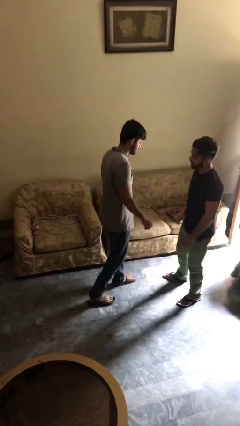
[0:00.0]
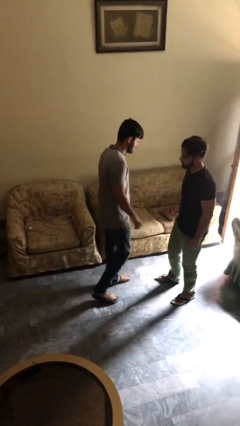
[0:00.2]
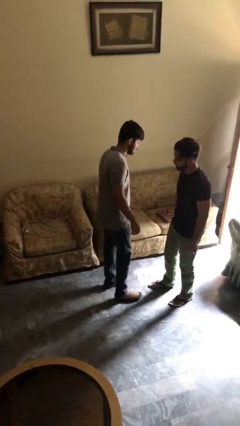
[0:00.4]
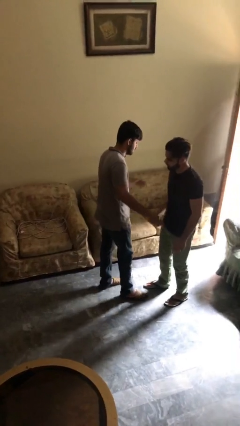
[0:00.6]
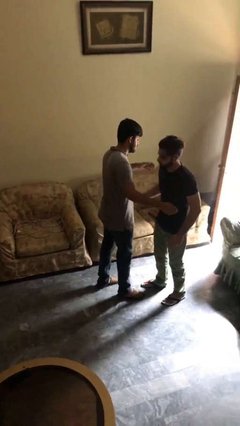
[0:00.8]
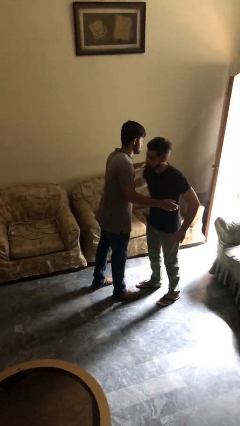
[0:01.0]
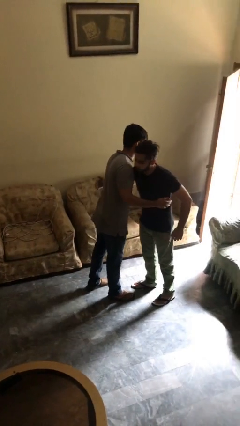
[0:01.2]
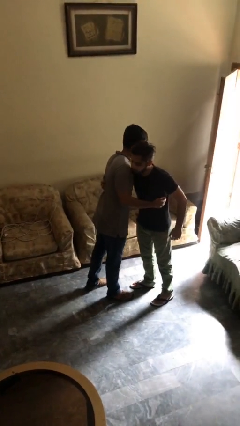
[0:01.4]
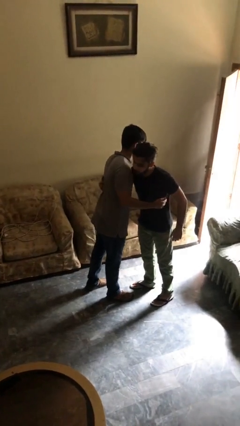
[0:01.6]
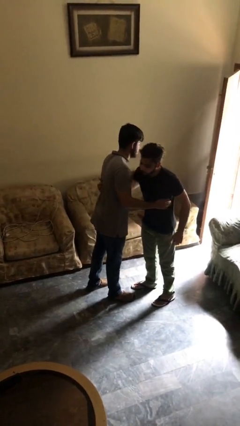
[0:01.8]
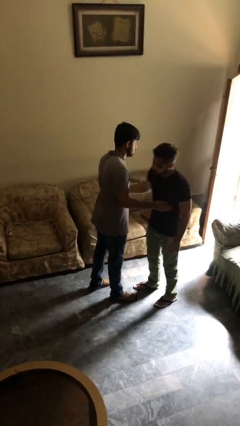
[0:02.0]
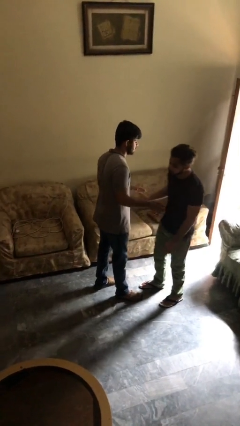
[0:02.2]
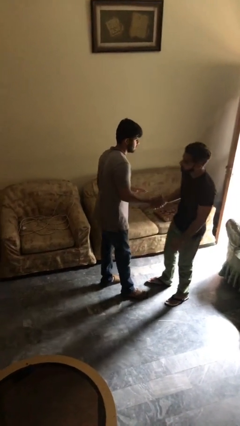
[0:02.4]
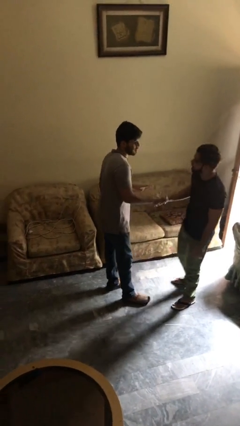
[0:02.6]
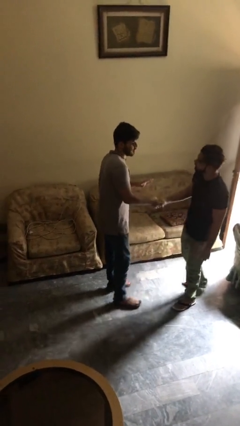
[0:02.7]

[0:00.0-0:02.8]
person embraces person

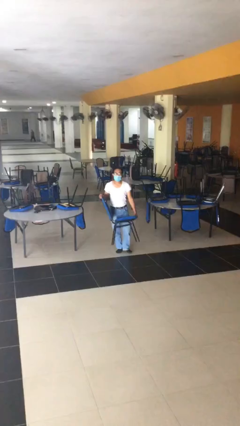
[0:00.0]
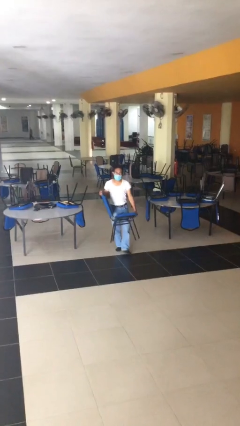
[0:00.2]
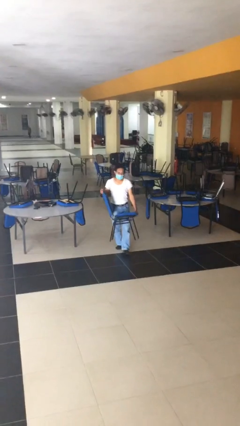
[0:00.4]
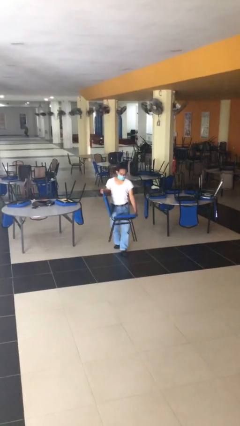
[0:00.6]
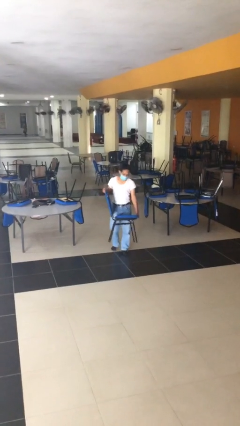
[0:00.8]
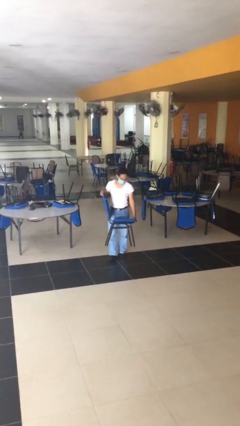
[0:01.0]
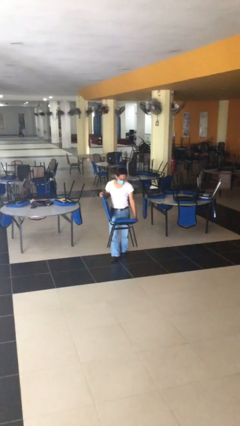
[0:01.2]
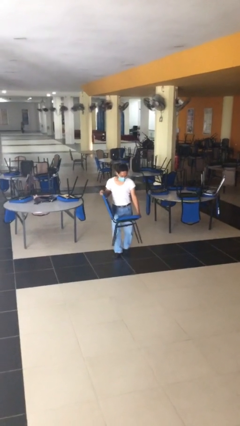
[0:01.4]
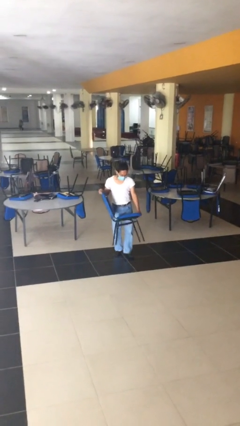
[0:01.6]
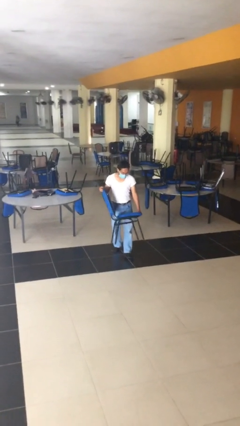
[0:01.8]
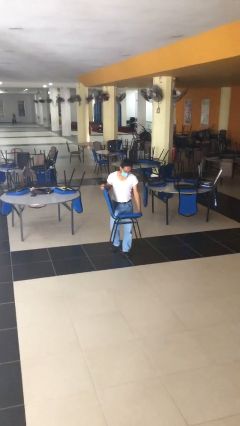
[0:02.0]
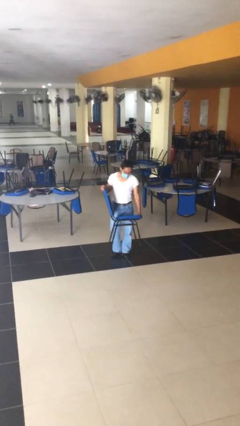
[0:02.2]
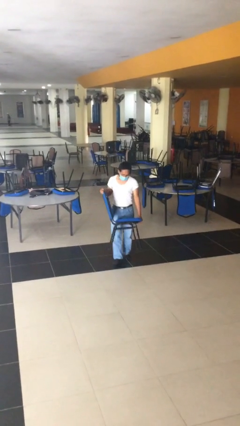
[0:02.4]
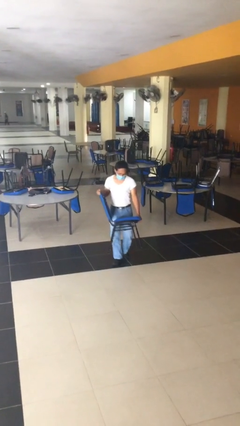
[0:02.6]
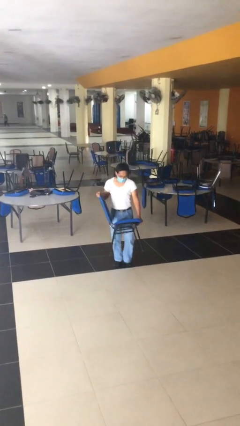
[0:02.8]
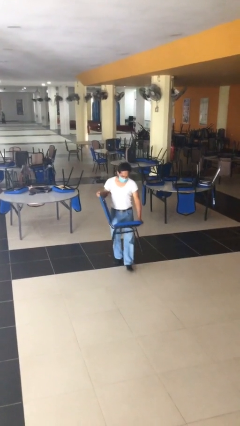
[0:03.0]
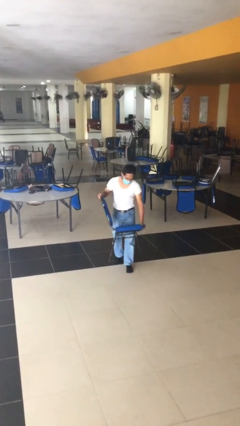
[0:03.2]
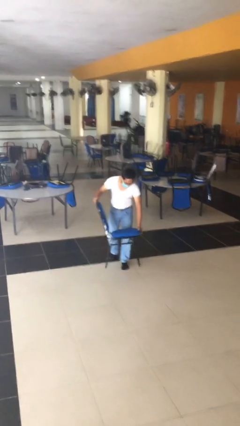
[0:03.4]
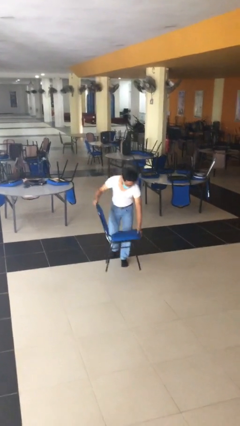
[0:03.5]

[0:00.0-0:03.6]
person carries heavy object

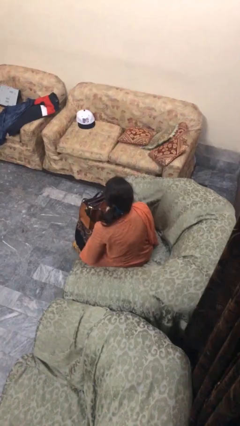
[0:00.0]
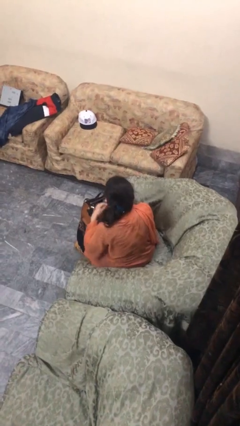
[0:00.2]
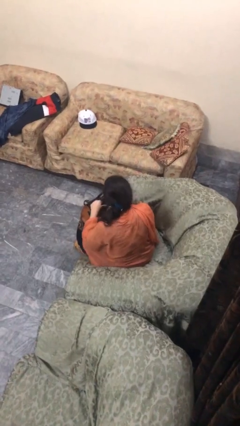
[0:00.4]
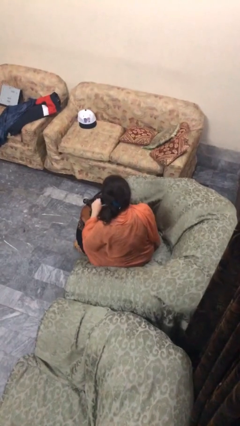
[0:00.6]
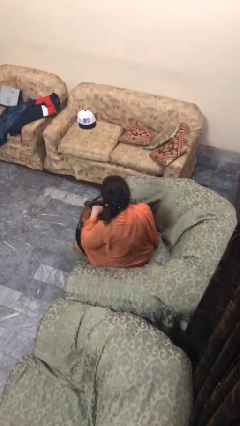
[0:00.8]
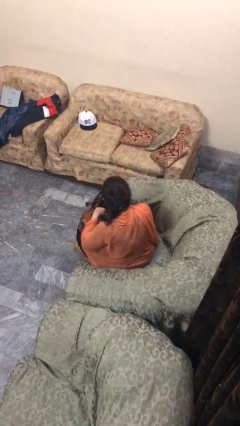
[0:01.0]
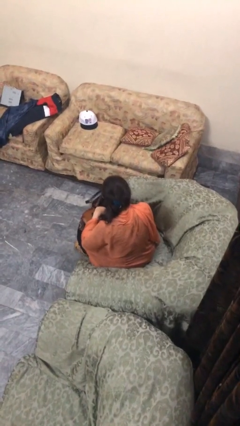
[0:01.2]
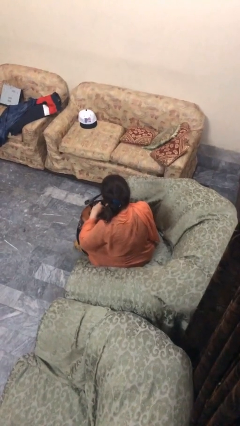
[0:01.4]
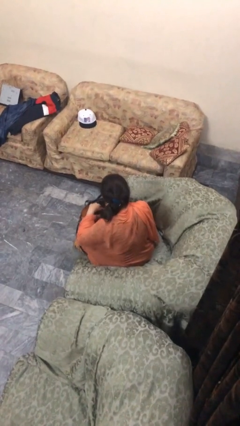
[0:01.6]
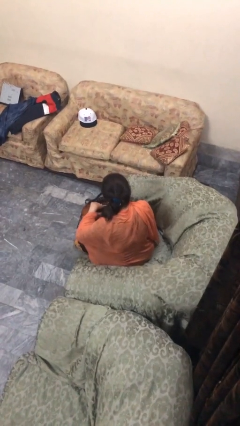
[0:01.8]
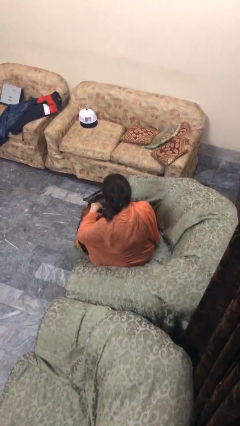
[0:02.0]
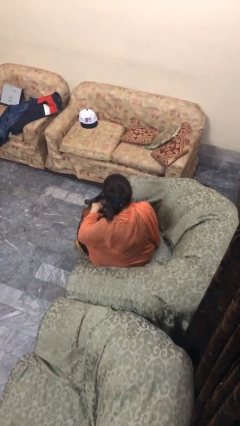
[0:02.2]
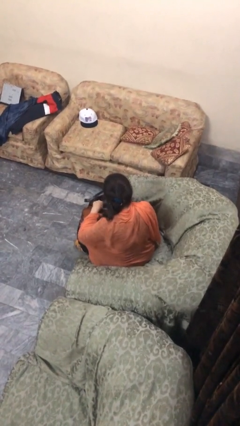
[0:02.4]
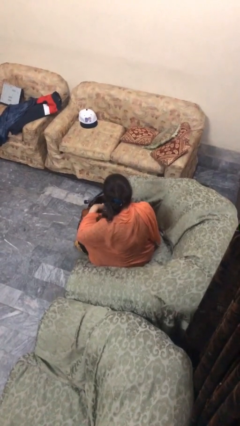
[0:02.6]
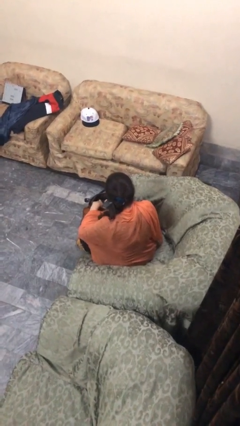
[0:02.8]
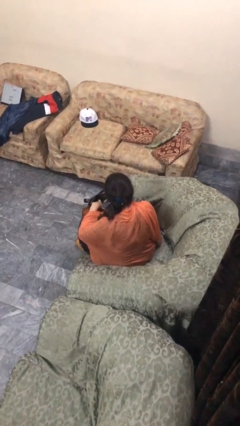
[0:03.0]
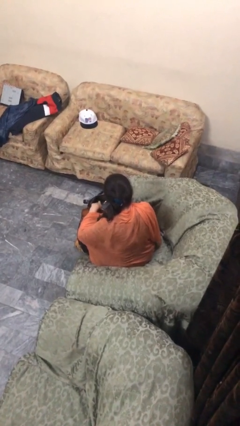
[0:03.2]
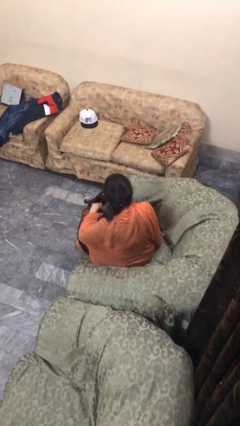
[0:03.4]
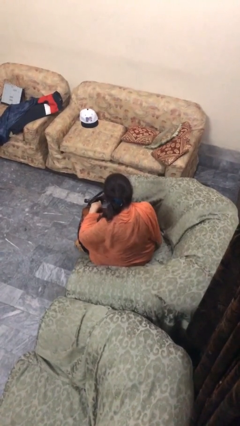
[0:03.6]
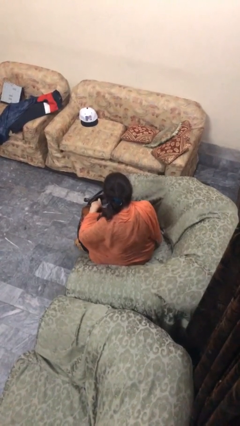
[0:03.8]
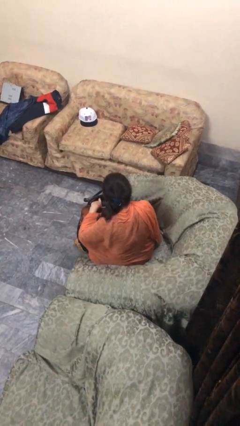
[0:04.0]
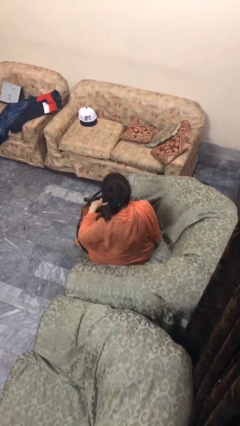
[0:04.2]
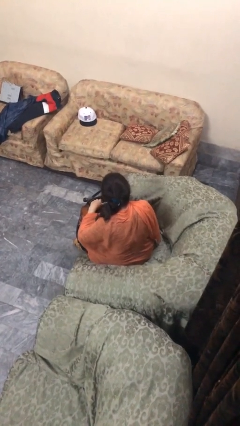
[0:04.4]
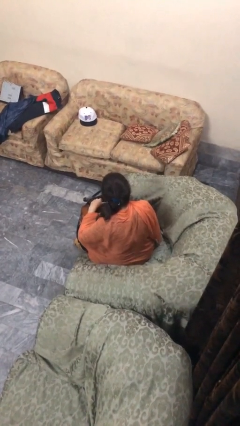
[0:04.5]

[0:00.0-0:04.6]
person searches in purse

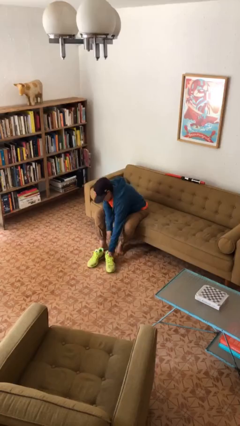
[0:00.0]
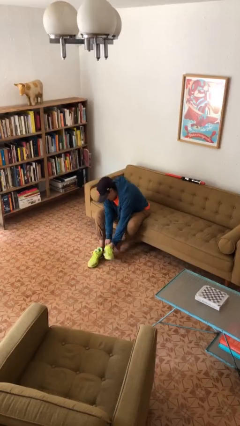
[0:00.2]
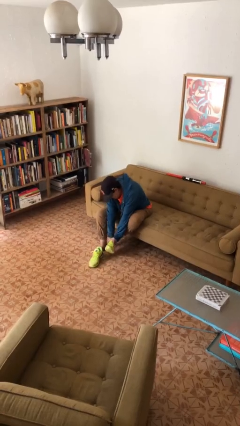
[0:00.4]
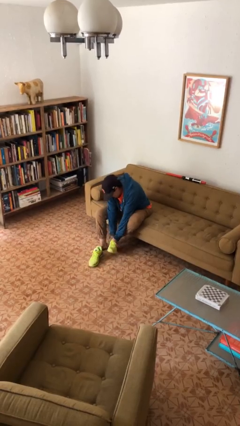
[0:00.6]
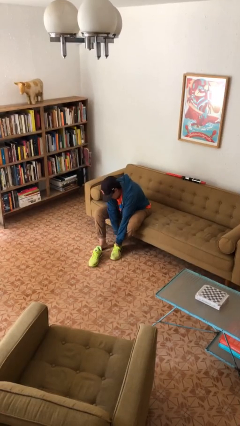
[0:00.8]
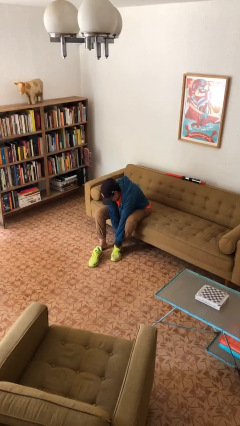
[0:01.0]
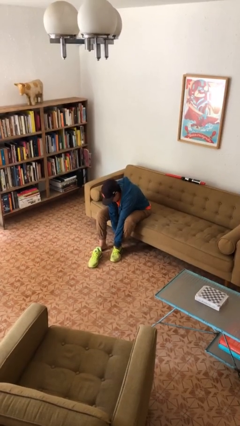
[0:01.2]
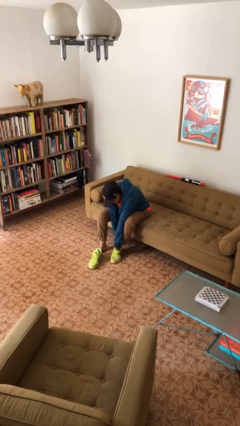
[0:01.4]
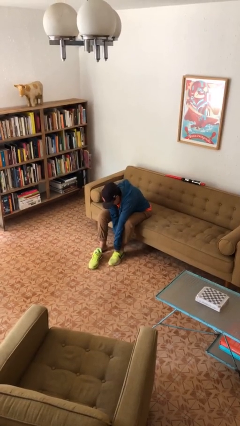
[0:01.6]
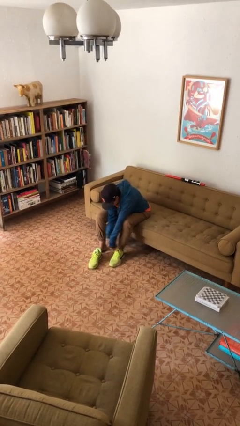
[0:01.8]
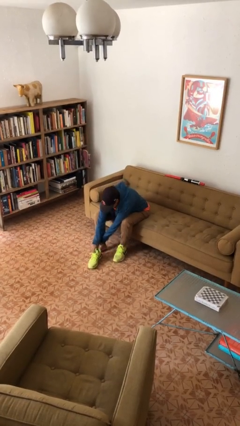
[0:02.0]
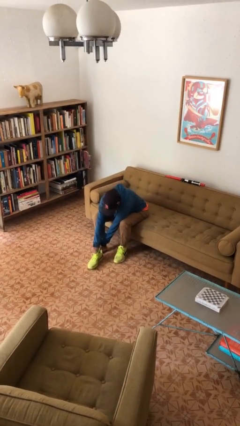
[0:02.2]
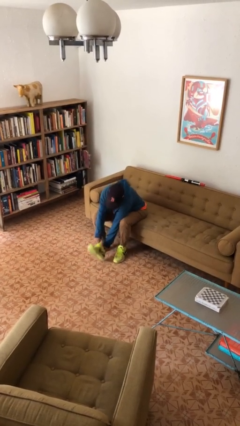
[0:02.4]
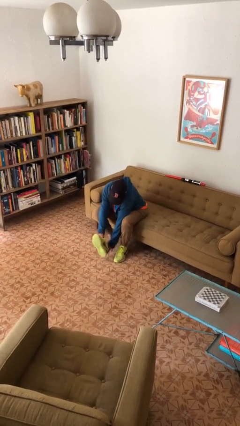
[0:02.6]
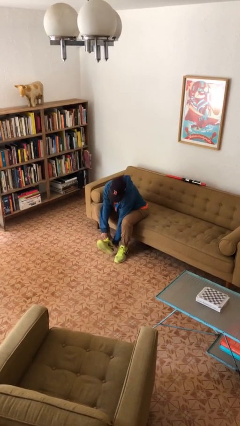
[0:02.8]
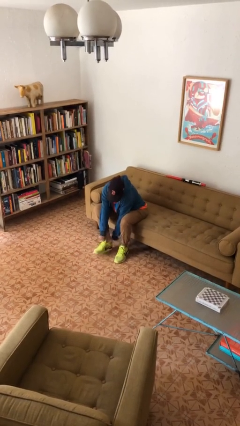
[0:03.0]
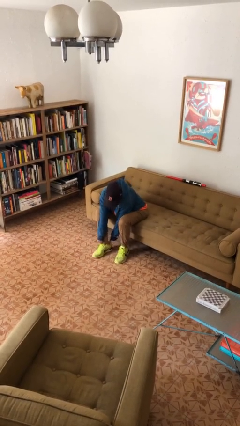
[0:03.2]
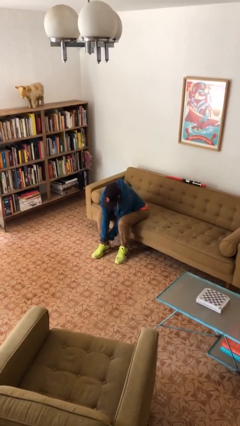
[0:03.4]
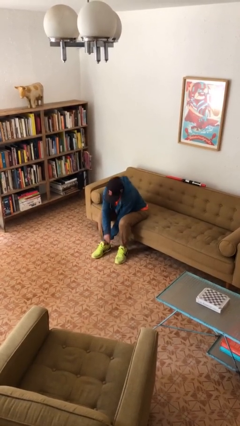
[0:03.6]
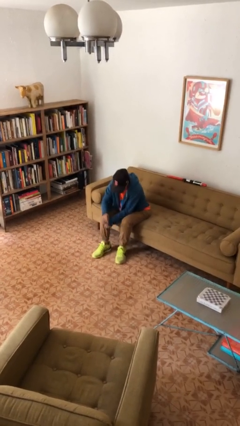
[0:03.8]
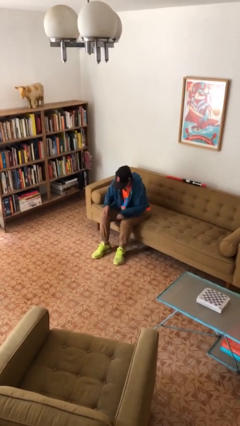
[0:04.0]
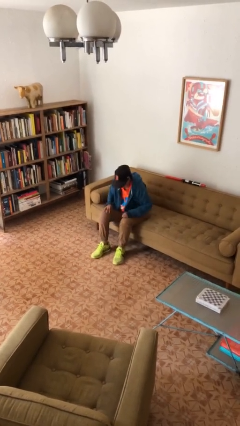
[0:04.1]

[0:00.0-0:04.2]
person puts on shoes

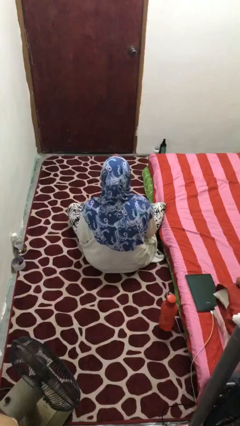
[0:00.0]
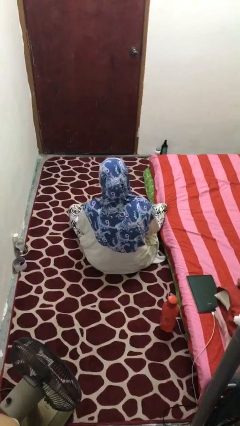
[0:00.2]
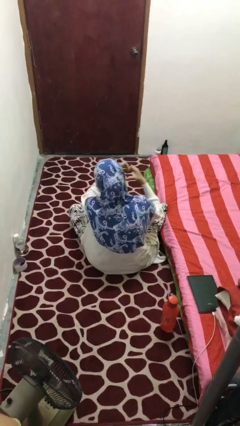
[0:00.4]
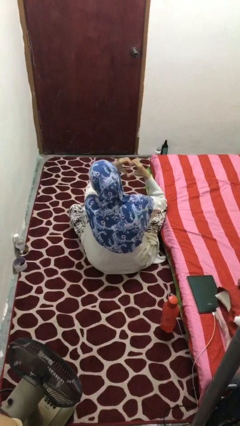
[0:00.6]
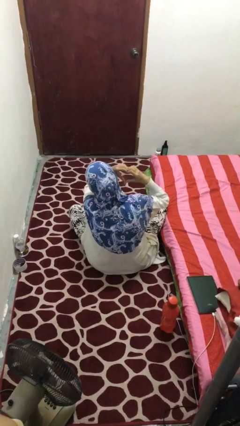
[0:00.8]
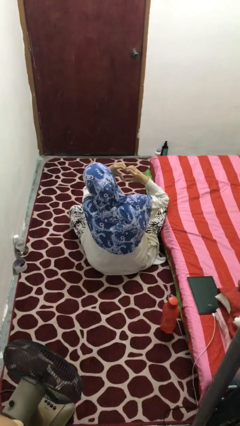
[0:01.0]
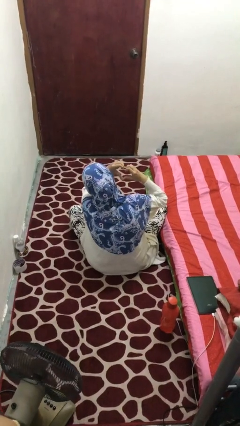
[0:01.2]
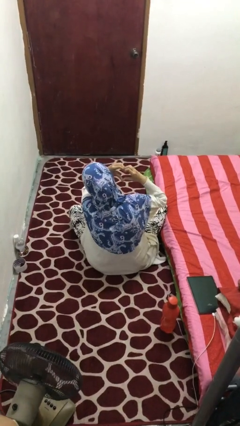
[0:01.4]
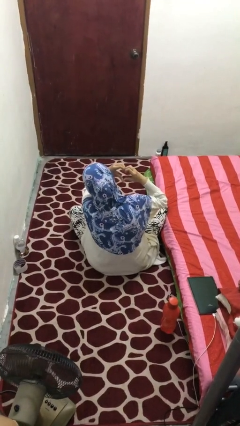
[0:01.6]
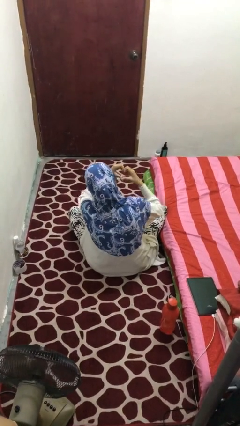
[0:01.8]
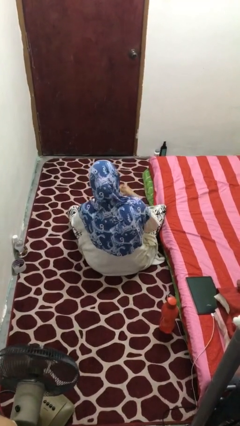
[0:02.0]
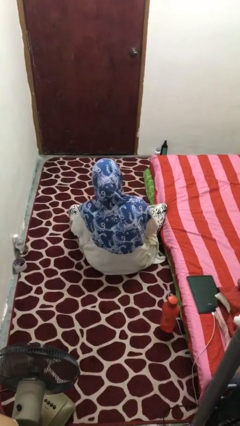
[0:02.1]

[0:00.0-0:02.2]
person gestures heart
